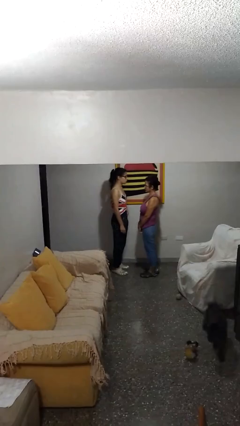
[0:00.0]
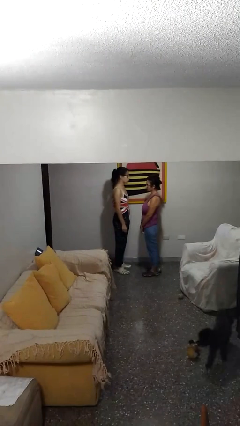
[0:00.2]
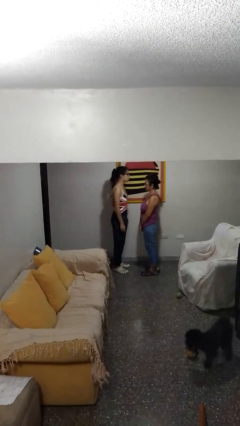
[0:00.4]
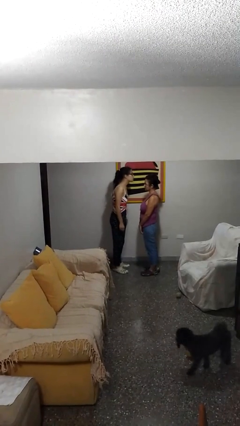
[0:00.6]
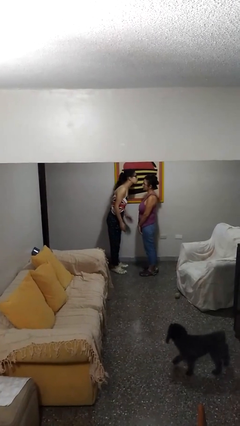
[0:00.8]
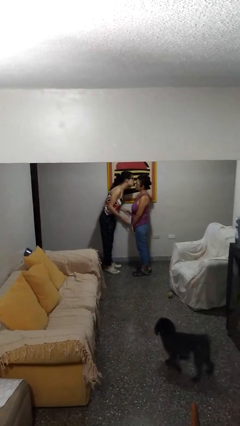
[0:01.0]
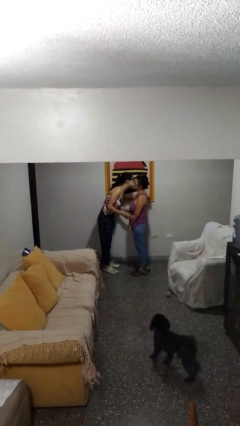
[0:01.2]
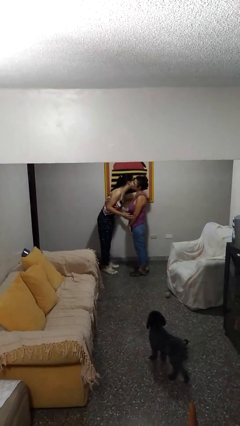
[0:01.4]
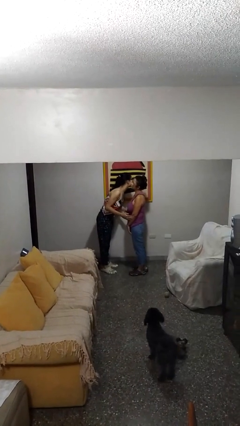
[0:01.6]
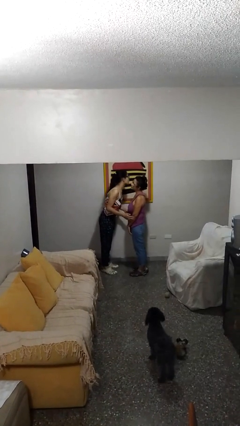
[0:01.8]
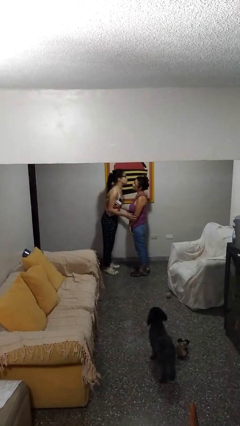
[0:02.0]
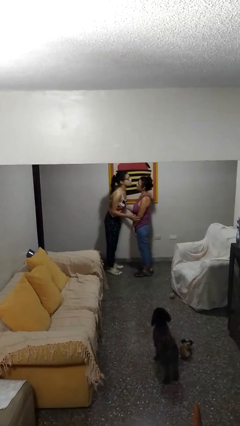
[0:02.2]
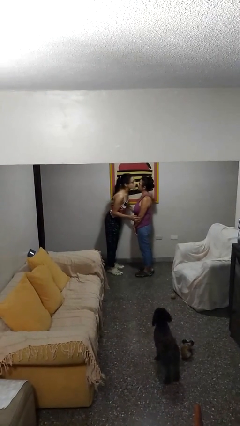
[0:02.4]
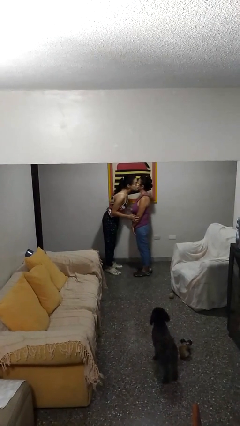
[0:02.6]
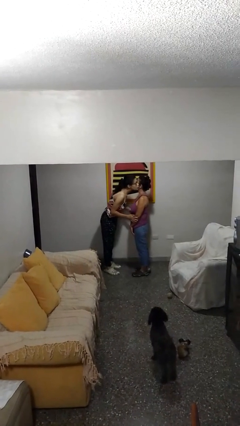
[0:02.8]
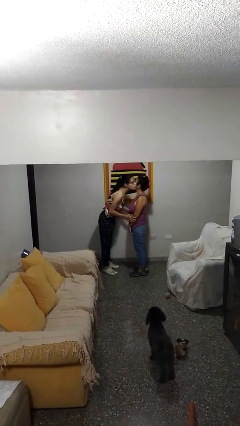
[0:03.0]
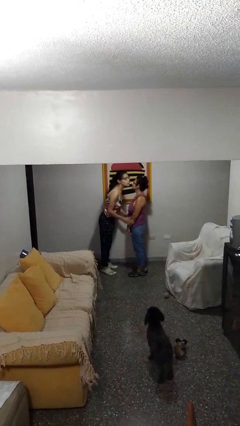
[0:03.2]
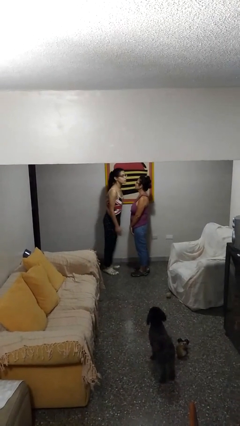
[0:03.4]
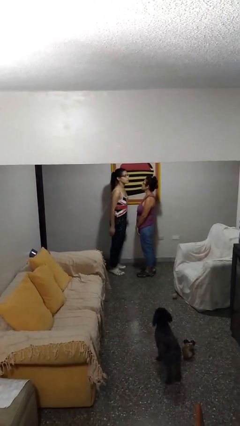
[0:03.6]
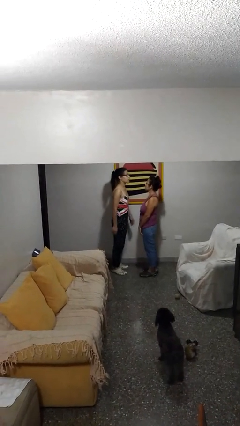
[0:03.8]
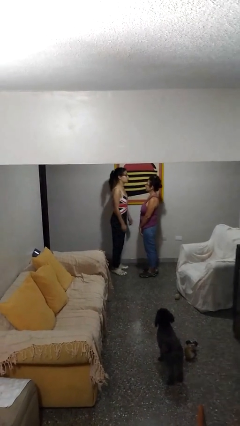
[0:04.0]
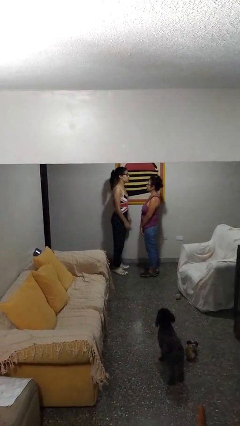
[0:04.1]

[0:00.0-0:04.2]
person kisses cheek of person

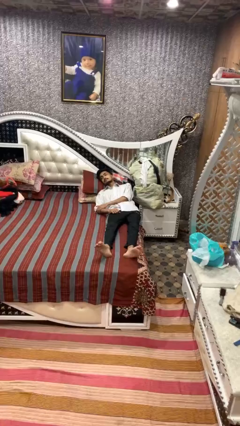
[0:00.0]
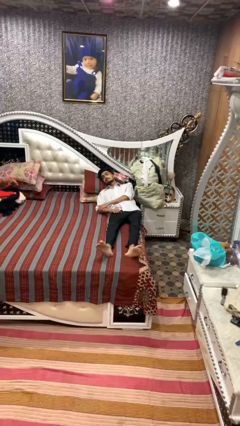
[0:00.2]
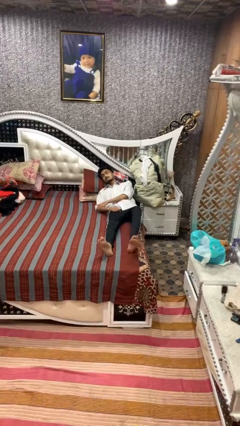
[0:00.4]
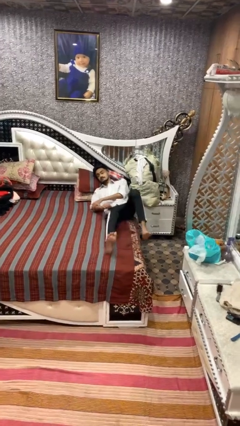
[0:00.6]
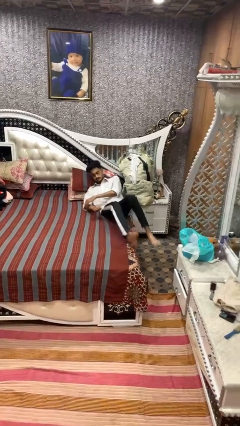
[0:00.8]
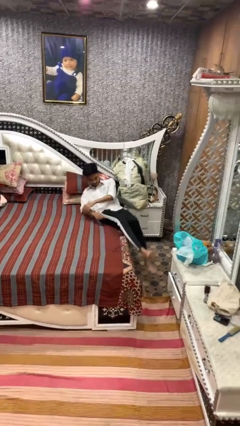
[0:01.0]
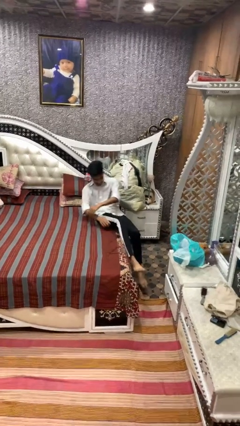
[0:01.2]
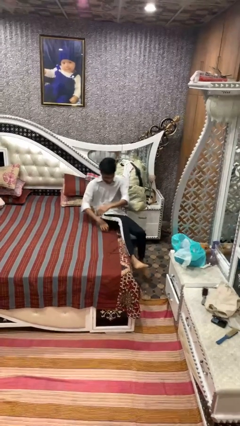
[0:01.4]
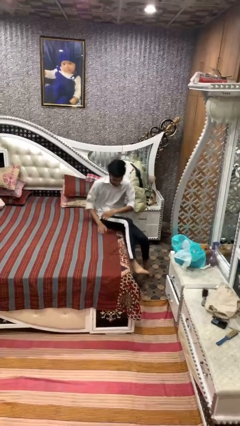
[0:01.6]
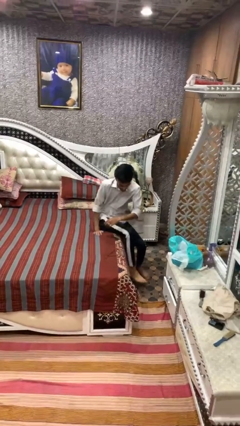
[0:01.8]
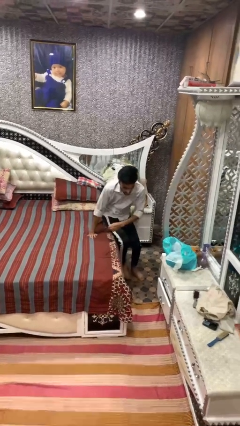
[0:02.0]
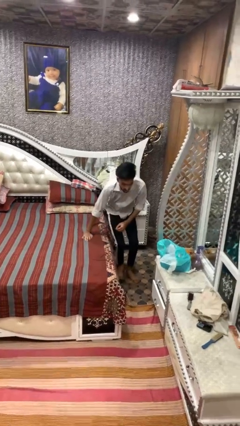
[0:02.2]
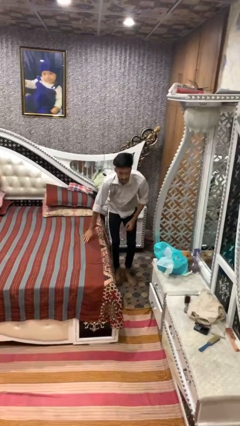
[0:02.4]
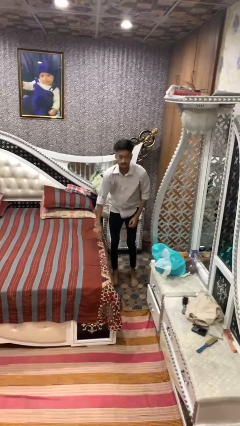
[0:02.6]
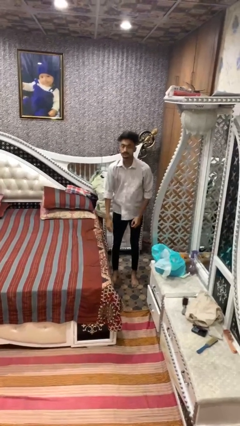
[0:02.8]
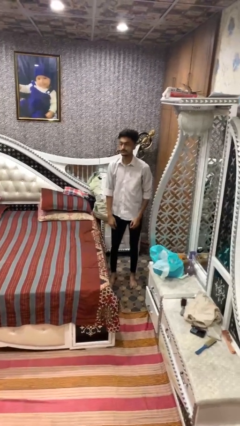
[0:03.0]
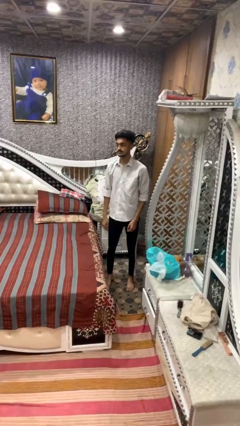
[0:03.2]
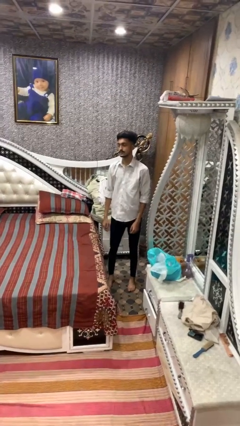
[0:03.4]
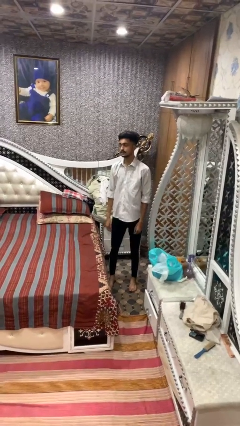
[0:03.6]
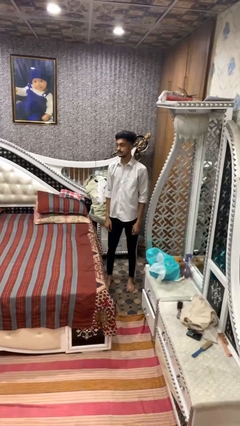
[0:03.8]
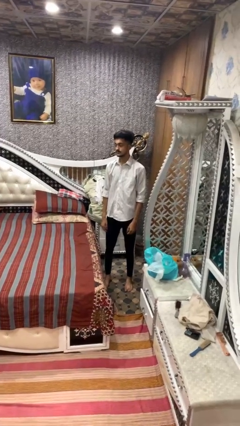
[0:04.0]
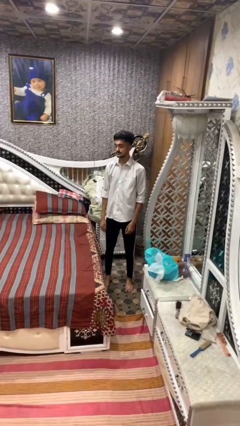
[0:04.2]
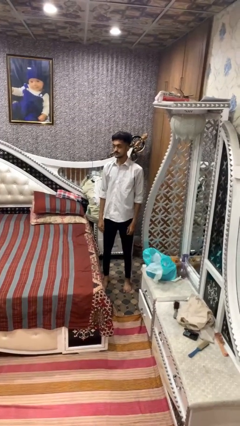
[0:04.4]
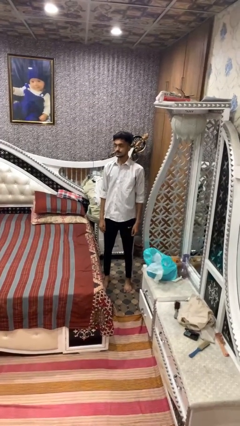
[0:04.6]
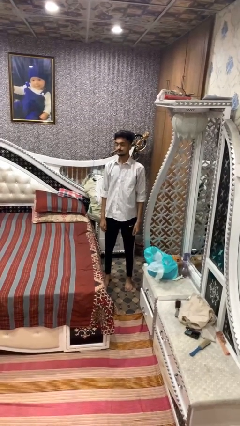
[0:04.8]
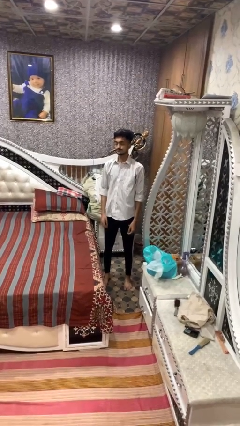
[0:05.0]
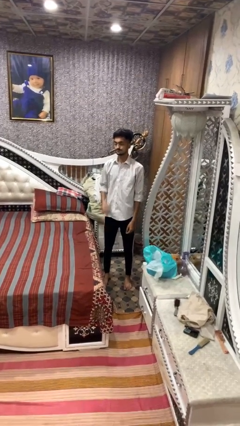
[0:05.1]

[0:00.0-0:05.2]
person stands up

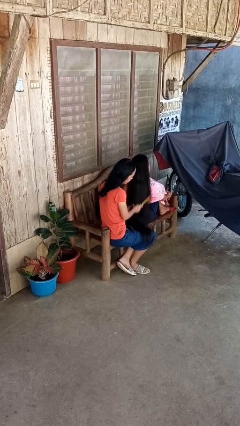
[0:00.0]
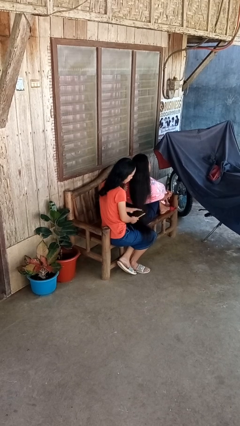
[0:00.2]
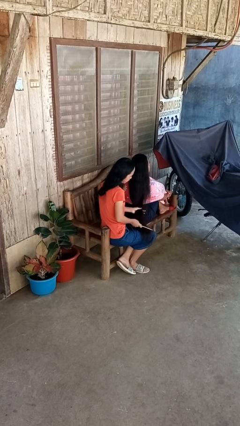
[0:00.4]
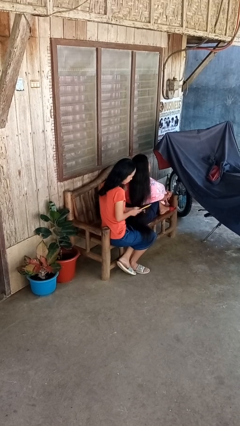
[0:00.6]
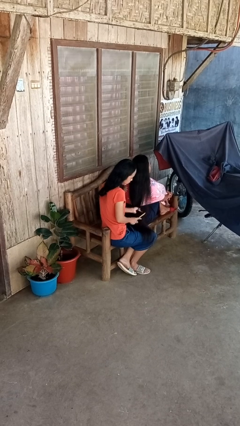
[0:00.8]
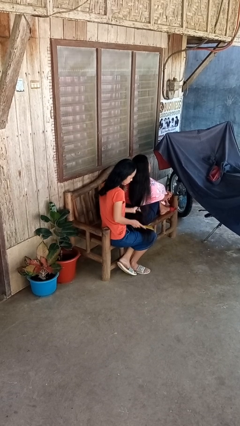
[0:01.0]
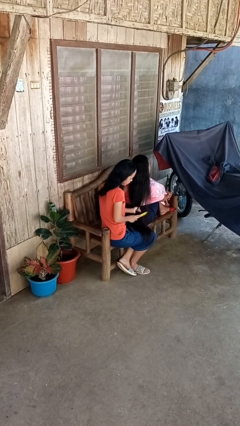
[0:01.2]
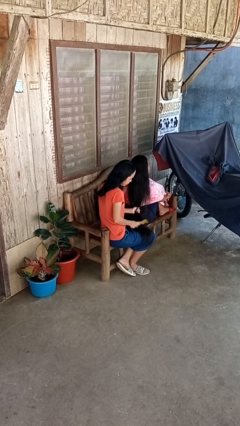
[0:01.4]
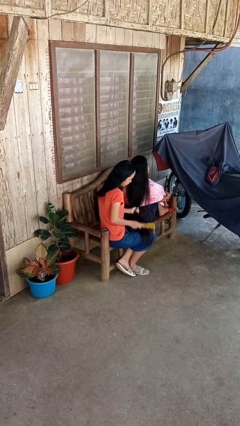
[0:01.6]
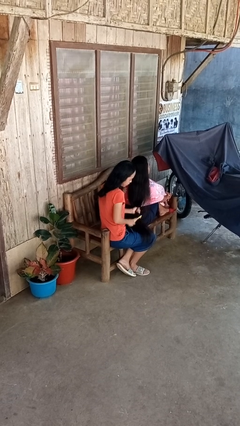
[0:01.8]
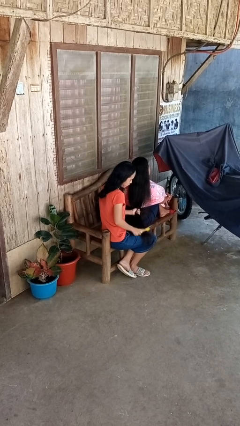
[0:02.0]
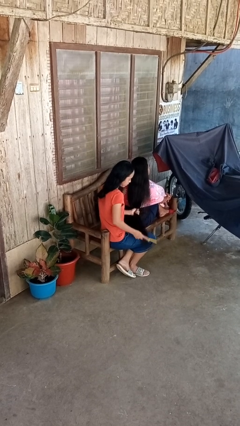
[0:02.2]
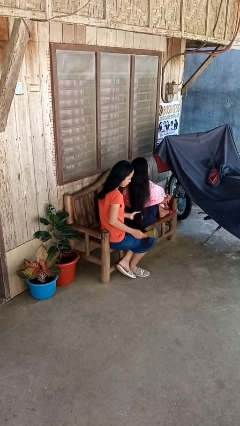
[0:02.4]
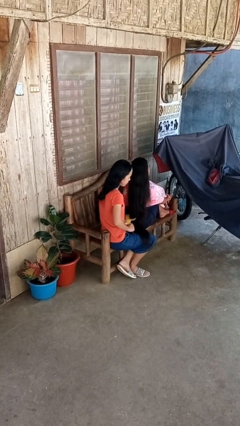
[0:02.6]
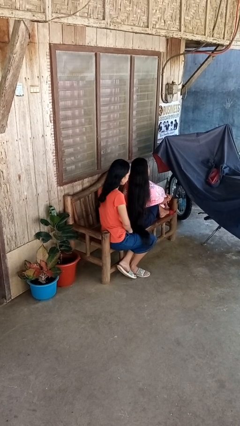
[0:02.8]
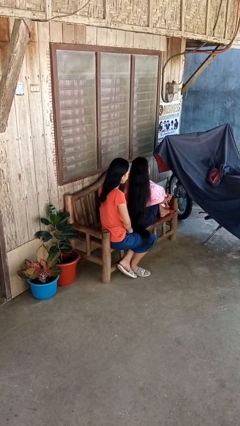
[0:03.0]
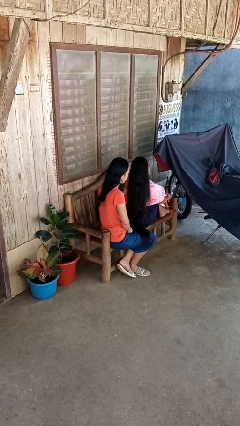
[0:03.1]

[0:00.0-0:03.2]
person brushes hair of person

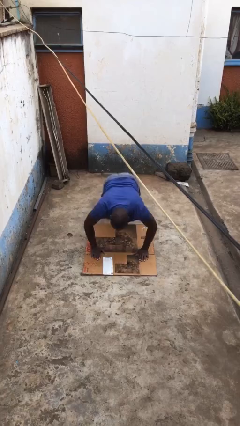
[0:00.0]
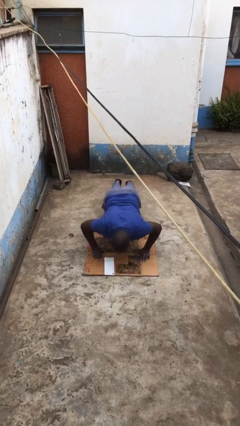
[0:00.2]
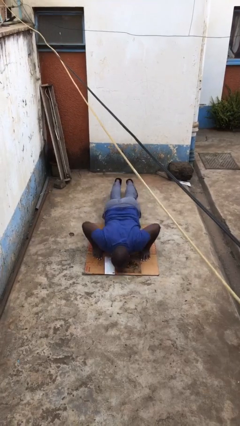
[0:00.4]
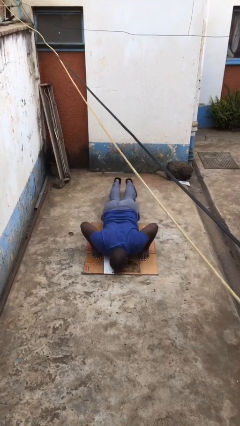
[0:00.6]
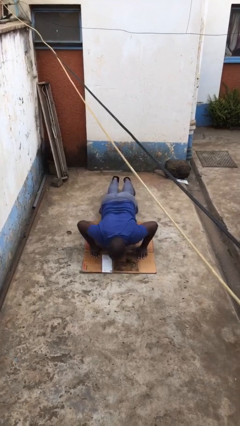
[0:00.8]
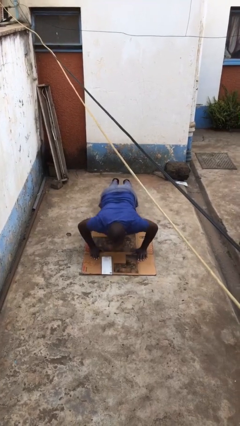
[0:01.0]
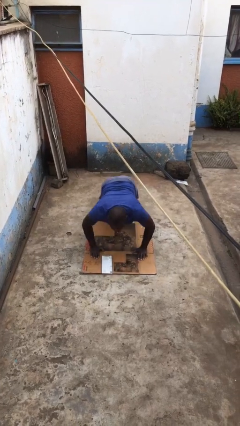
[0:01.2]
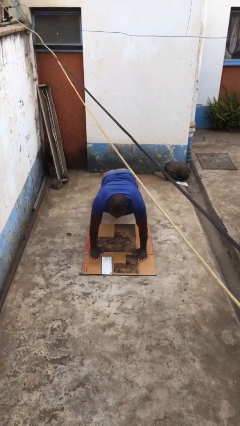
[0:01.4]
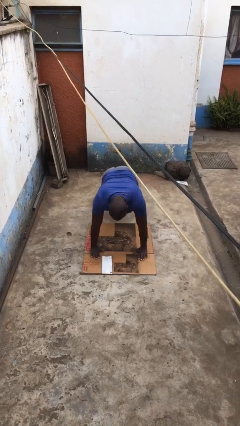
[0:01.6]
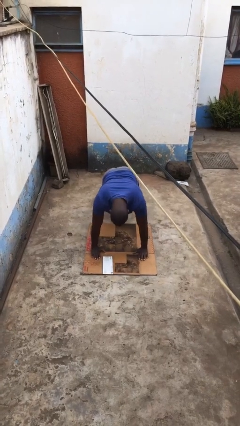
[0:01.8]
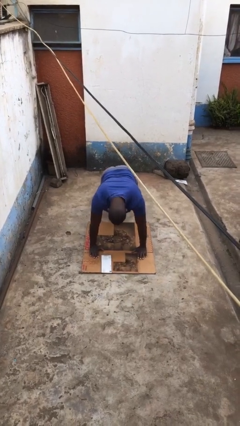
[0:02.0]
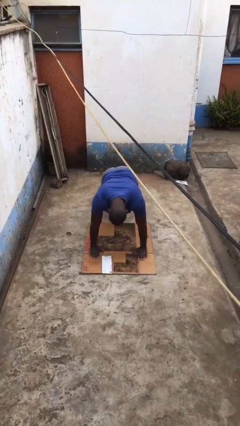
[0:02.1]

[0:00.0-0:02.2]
person exercises with pushup

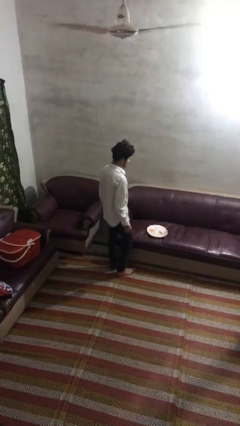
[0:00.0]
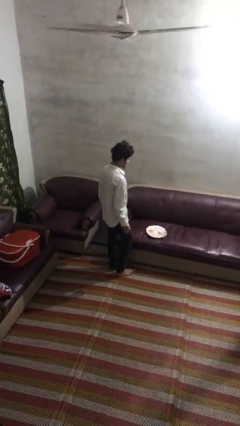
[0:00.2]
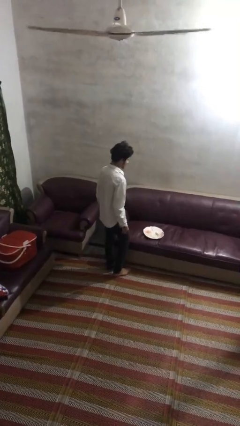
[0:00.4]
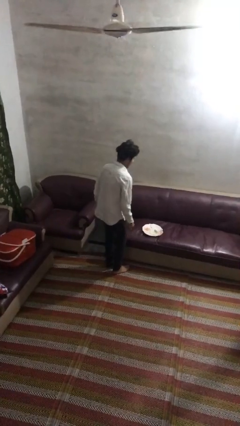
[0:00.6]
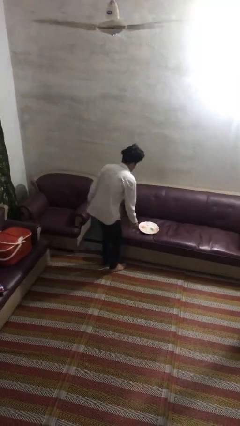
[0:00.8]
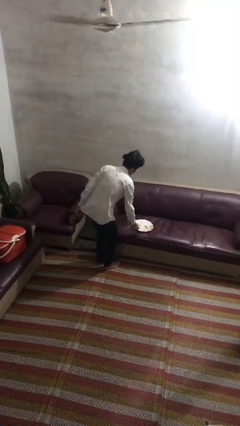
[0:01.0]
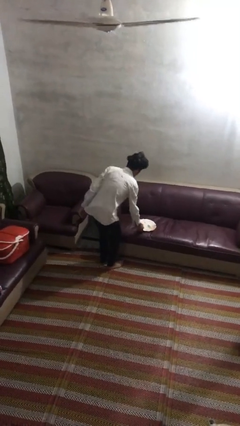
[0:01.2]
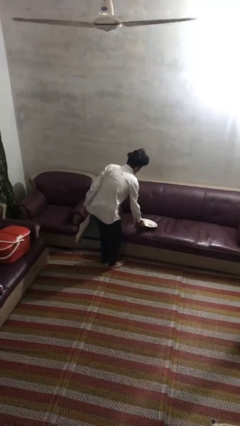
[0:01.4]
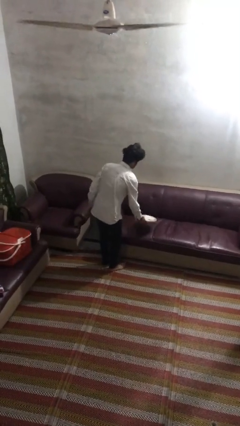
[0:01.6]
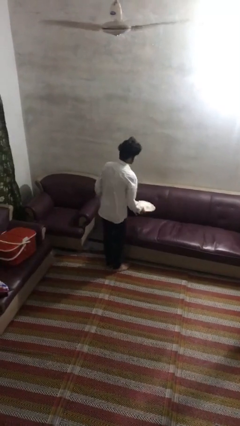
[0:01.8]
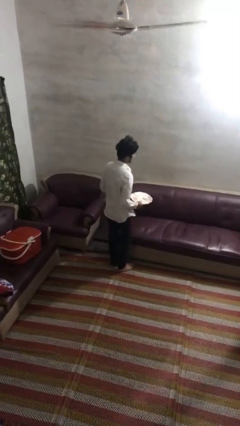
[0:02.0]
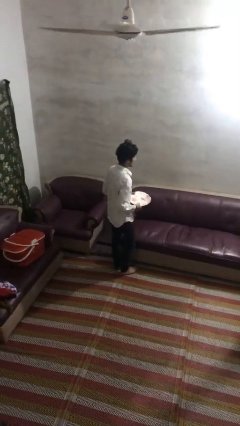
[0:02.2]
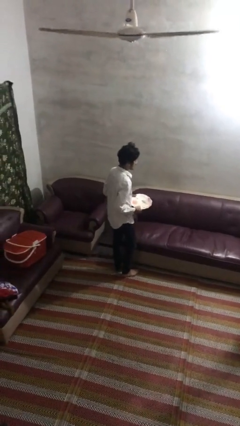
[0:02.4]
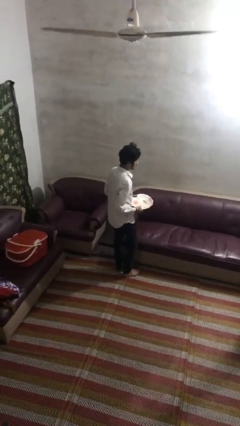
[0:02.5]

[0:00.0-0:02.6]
person picks up object from couch
